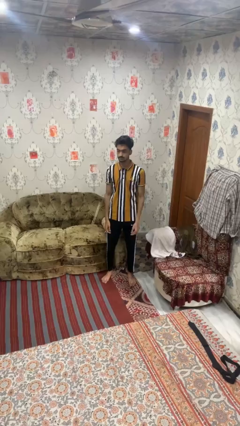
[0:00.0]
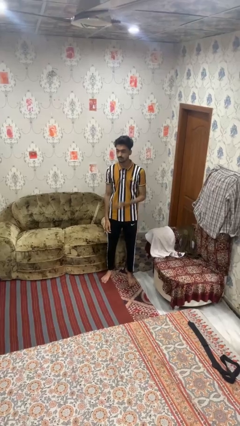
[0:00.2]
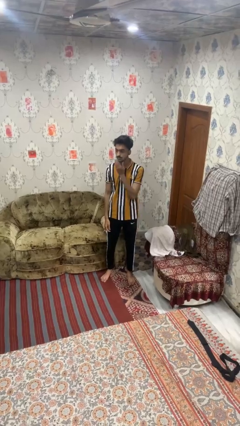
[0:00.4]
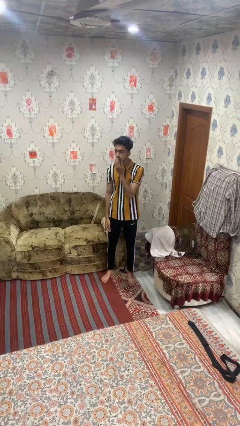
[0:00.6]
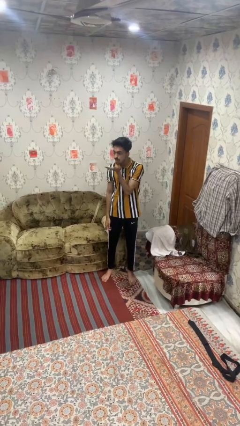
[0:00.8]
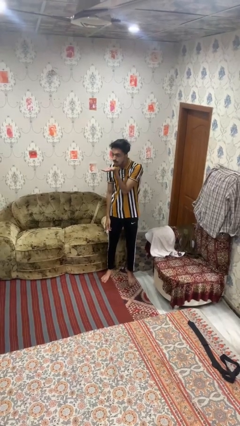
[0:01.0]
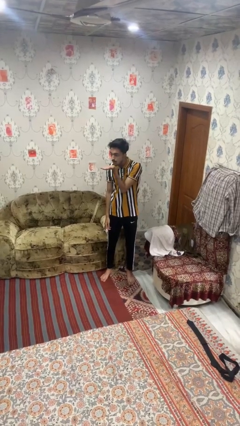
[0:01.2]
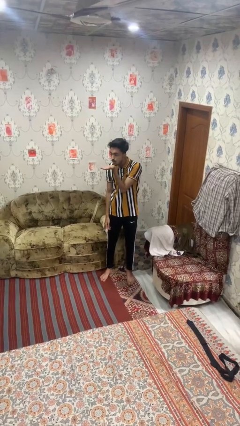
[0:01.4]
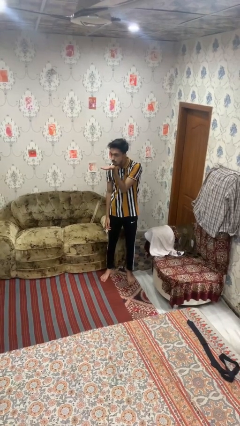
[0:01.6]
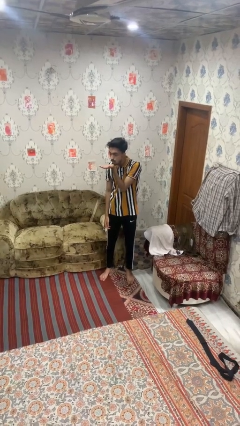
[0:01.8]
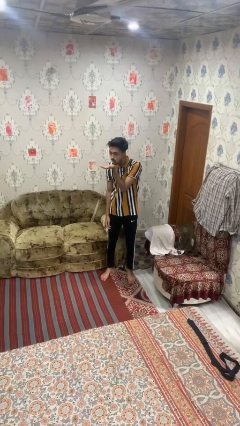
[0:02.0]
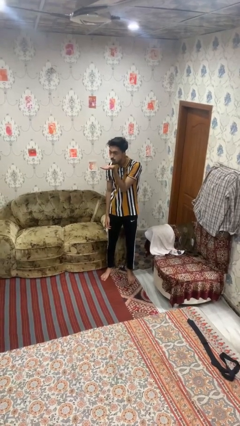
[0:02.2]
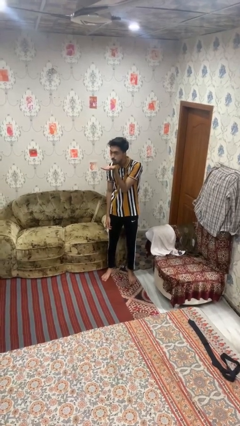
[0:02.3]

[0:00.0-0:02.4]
person gestures blow kiss

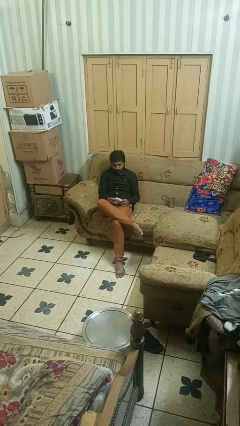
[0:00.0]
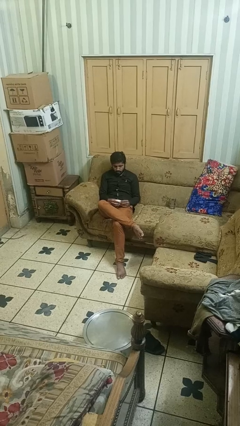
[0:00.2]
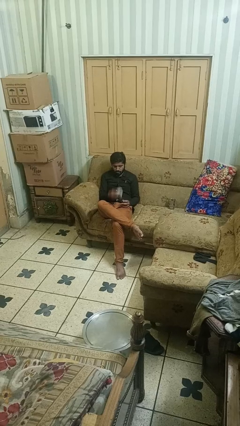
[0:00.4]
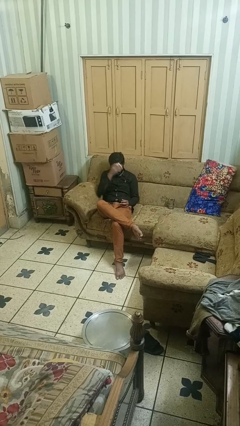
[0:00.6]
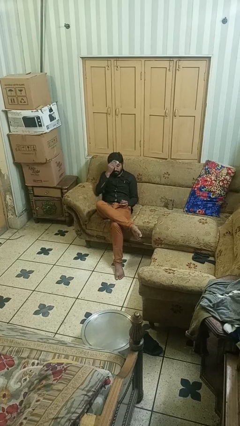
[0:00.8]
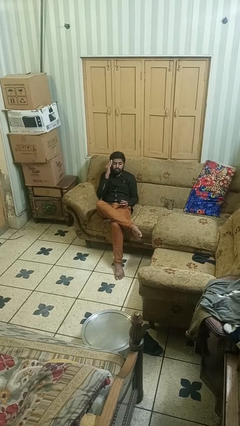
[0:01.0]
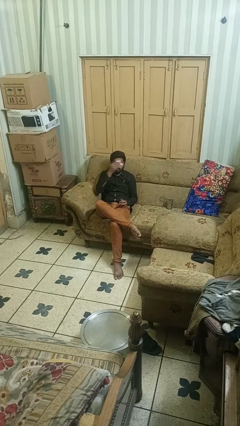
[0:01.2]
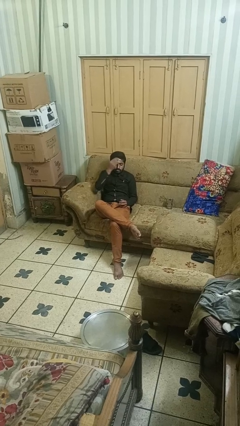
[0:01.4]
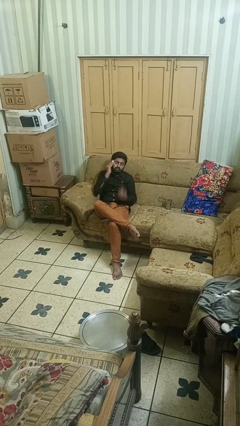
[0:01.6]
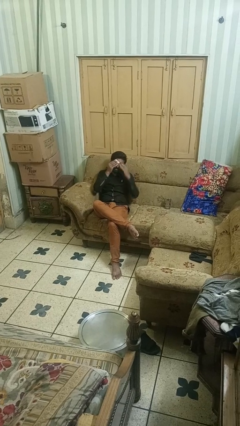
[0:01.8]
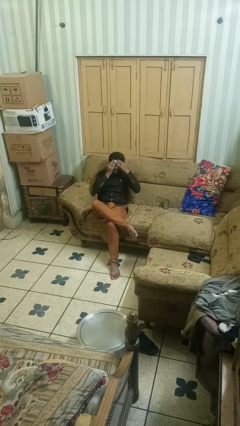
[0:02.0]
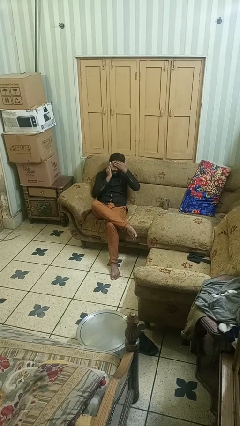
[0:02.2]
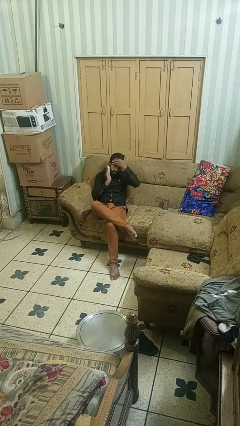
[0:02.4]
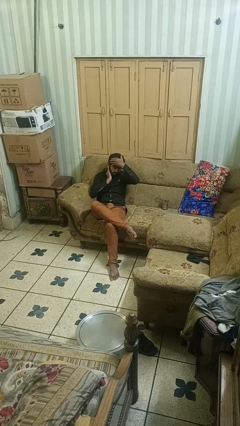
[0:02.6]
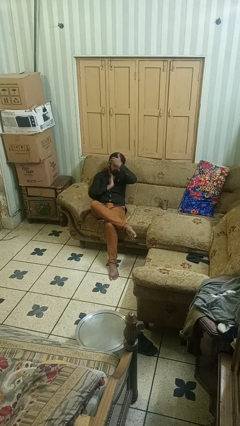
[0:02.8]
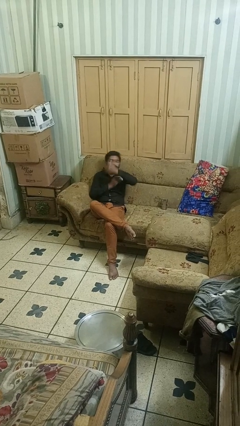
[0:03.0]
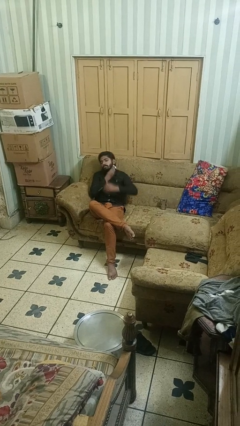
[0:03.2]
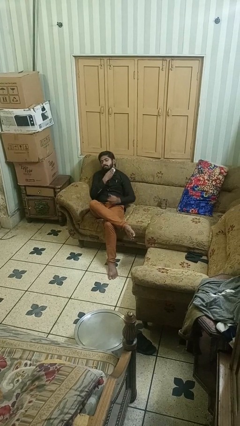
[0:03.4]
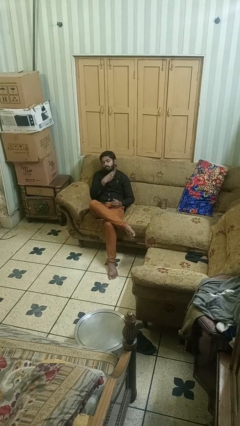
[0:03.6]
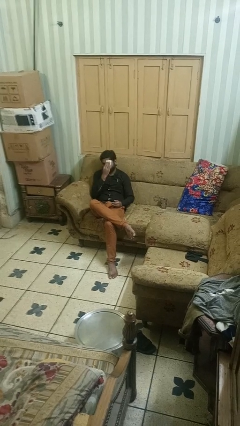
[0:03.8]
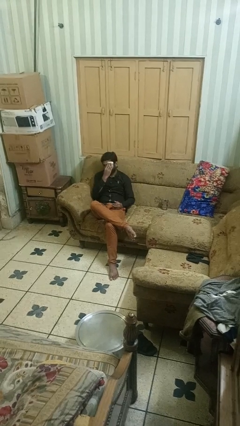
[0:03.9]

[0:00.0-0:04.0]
person wipes mouth with napkin

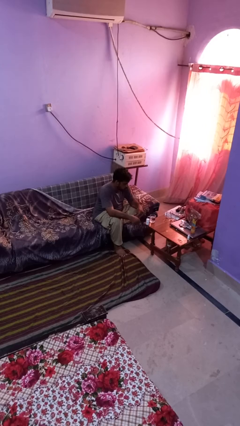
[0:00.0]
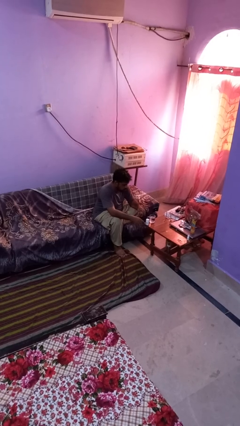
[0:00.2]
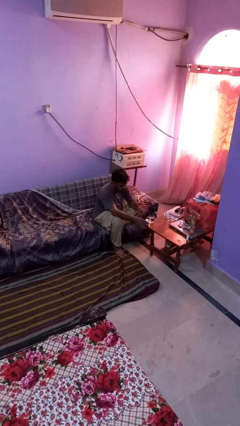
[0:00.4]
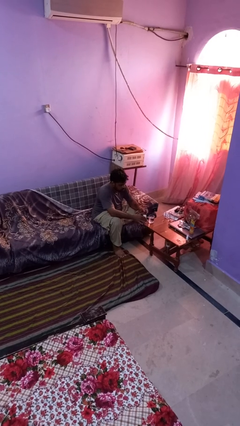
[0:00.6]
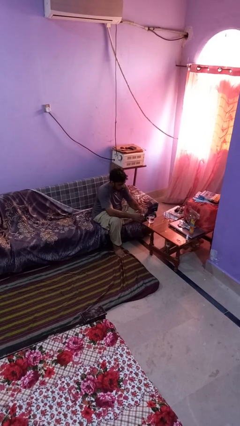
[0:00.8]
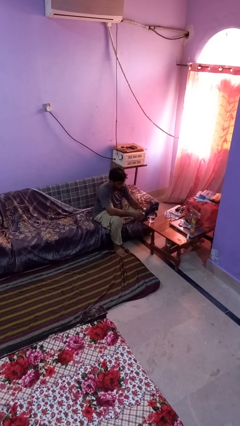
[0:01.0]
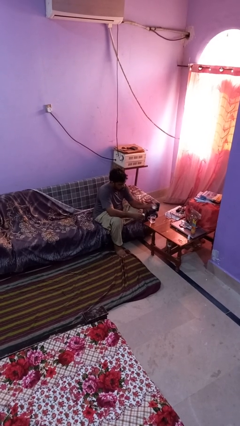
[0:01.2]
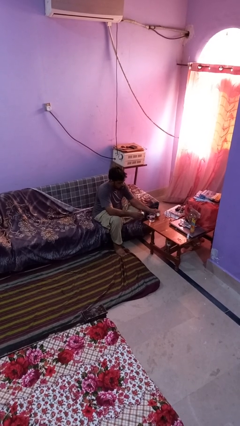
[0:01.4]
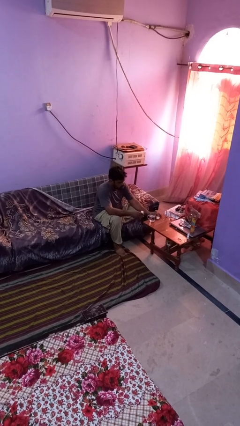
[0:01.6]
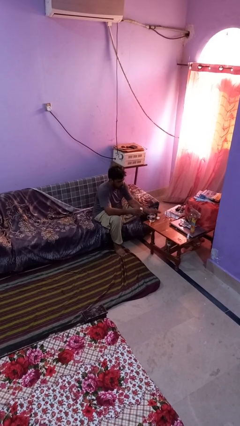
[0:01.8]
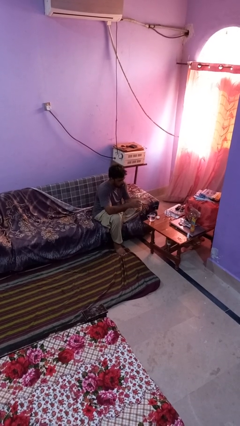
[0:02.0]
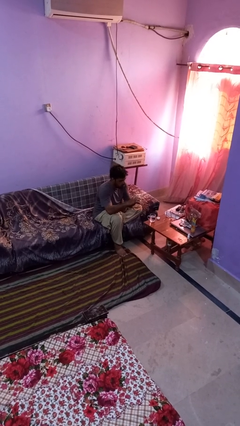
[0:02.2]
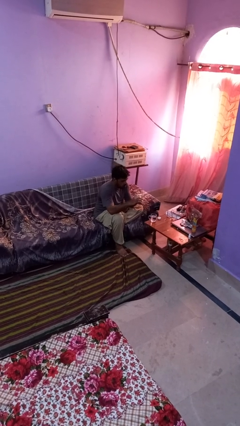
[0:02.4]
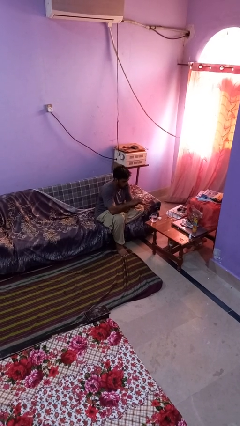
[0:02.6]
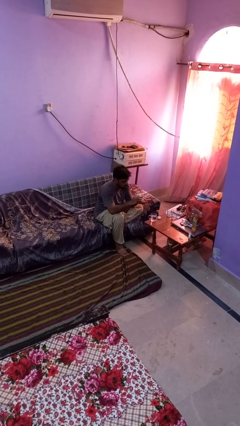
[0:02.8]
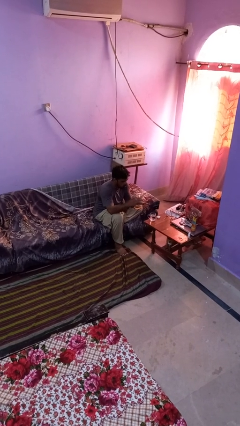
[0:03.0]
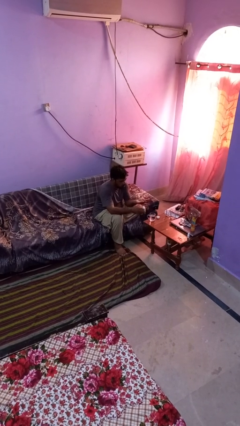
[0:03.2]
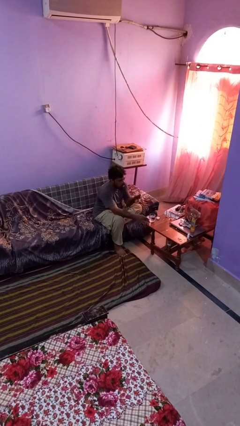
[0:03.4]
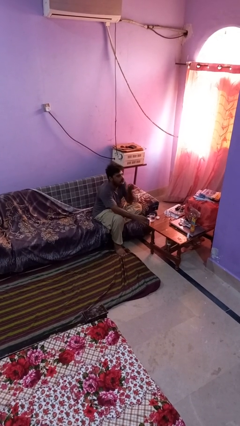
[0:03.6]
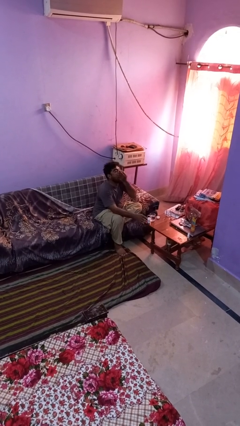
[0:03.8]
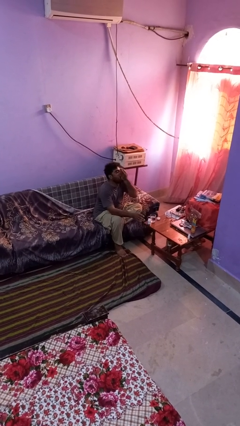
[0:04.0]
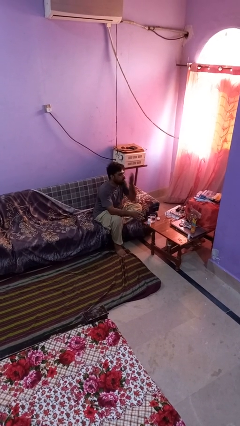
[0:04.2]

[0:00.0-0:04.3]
person takes medicine pills

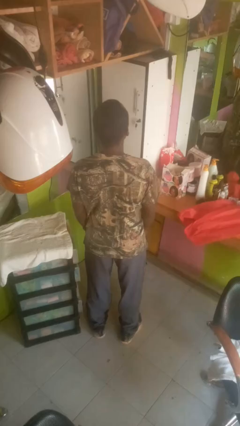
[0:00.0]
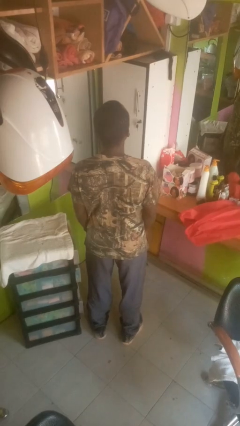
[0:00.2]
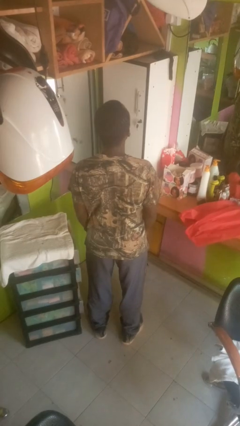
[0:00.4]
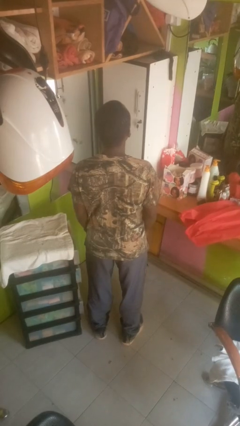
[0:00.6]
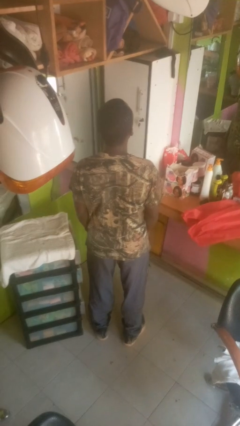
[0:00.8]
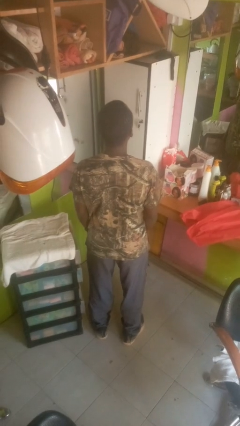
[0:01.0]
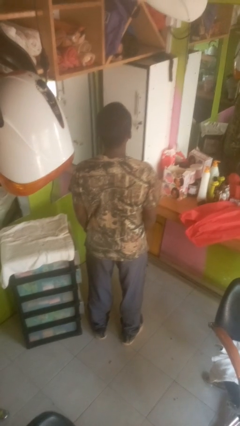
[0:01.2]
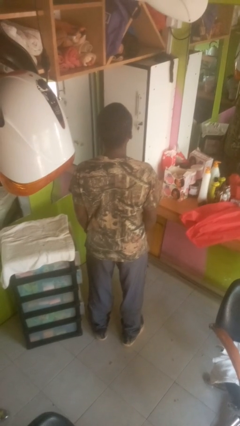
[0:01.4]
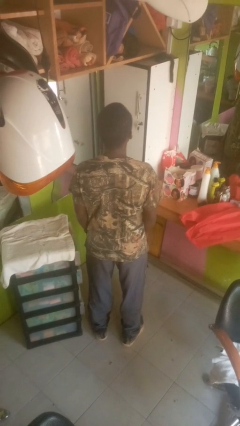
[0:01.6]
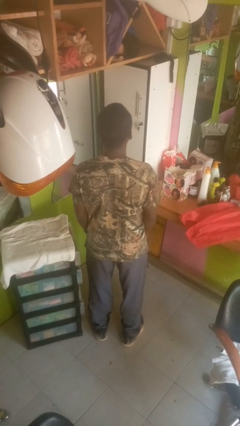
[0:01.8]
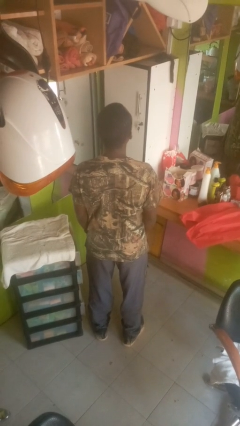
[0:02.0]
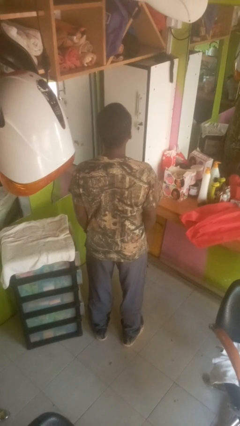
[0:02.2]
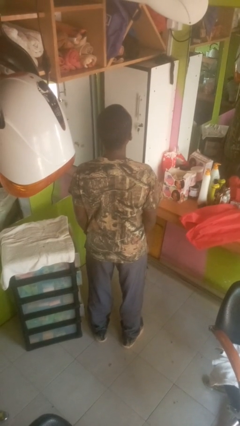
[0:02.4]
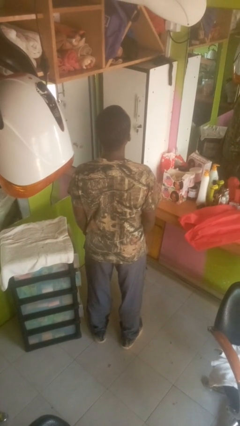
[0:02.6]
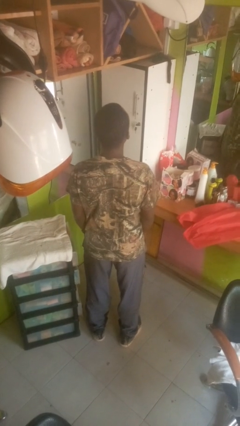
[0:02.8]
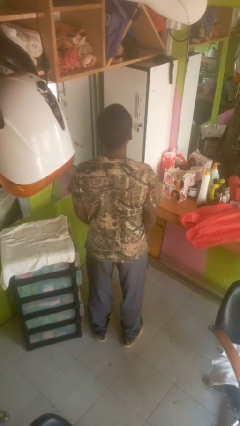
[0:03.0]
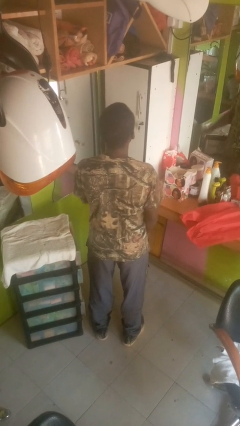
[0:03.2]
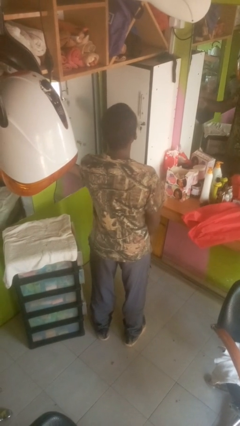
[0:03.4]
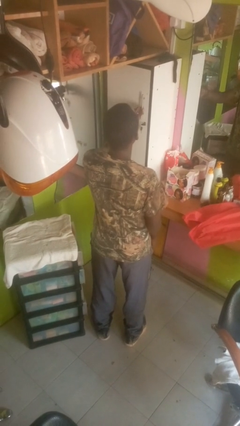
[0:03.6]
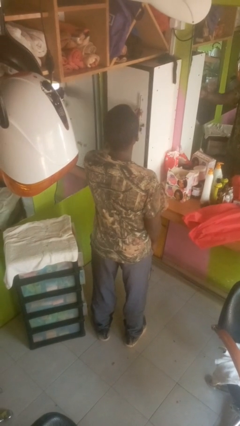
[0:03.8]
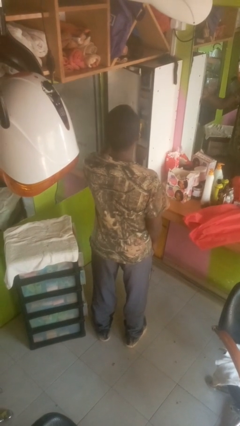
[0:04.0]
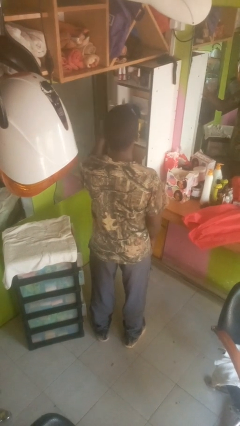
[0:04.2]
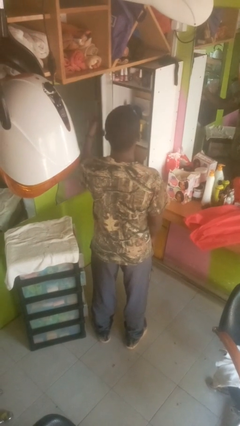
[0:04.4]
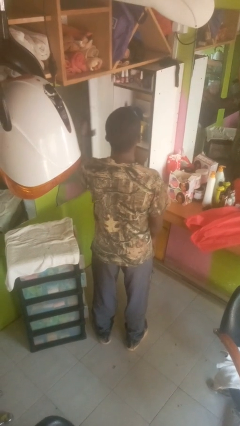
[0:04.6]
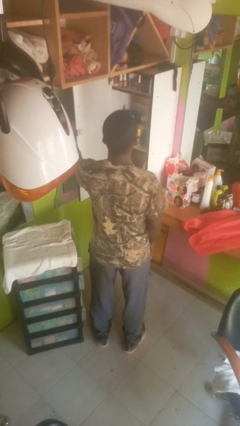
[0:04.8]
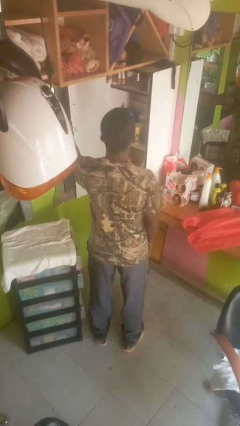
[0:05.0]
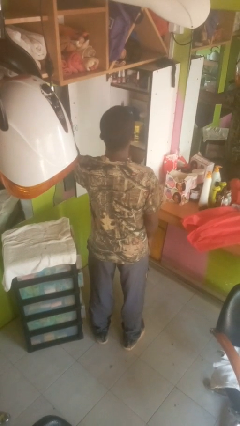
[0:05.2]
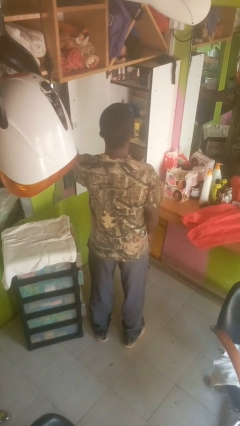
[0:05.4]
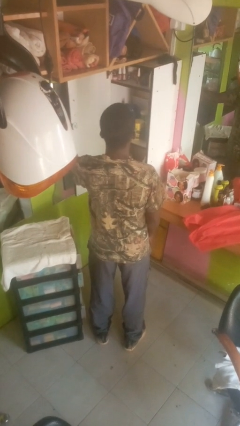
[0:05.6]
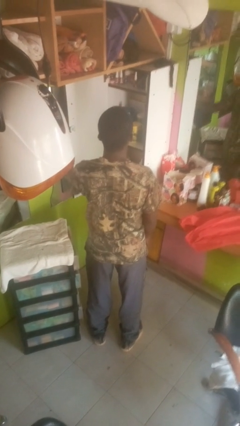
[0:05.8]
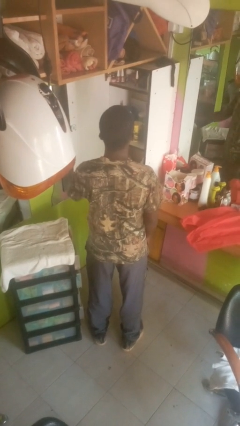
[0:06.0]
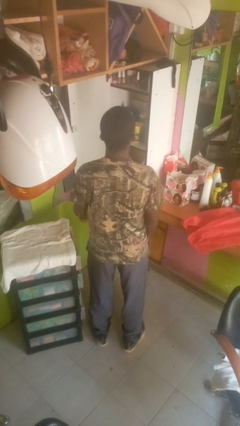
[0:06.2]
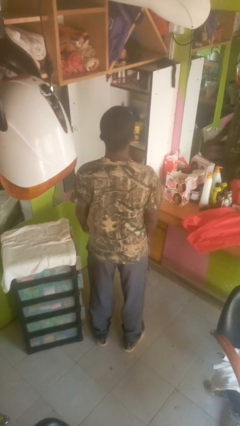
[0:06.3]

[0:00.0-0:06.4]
person opens closet door

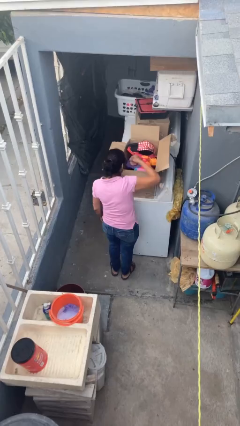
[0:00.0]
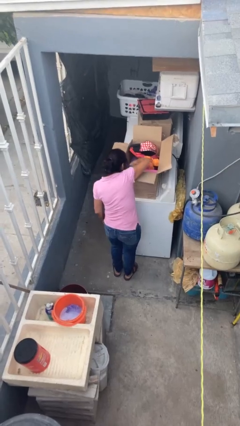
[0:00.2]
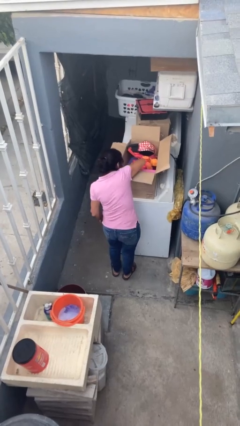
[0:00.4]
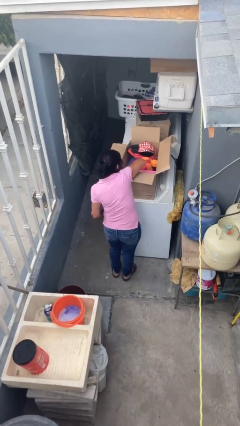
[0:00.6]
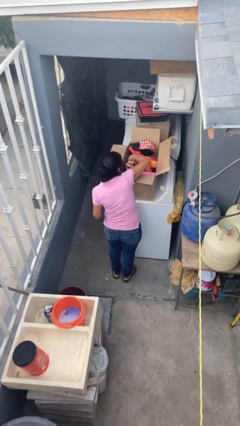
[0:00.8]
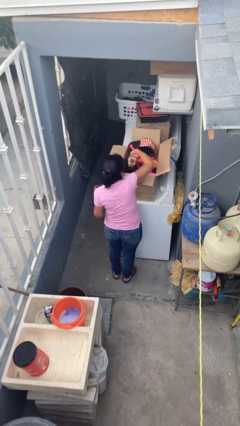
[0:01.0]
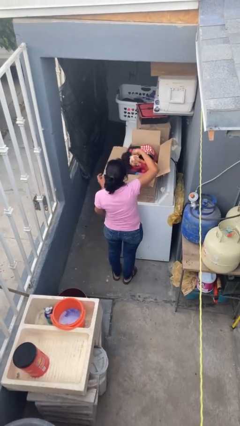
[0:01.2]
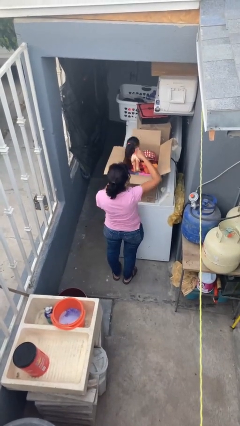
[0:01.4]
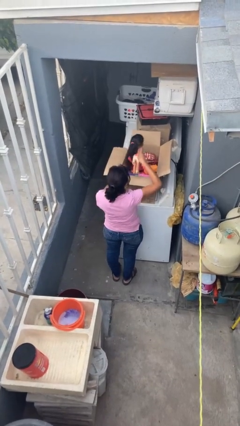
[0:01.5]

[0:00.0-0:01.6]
person takes object from box
